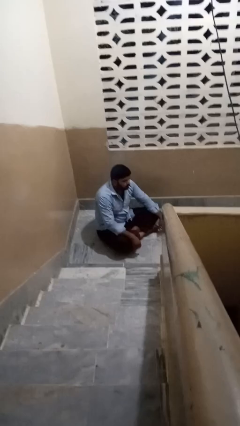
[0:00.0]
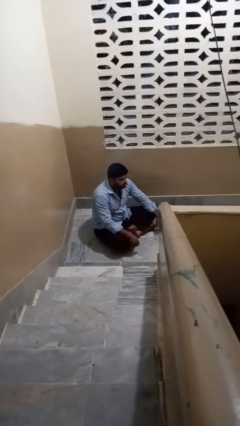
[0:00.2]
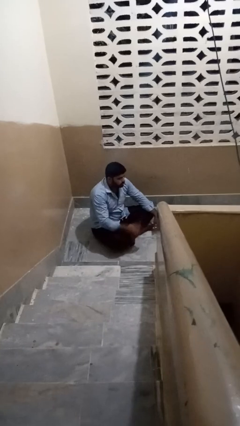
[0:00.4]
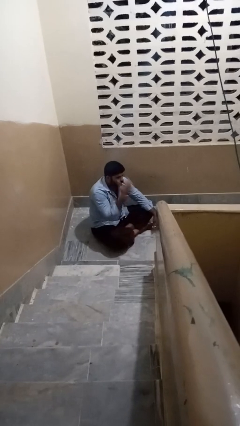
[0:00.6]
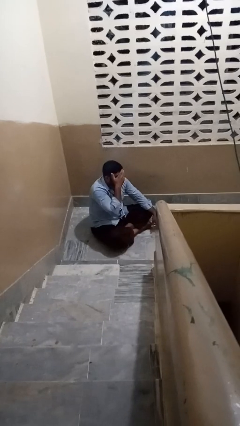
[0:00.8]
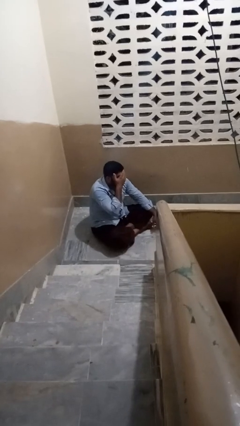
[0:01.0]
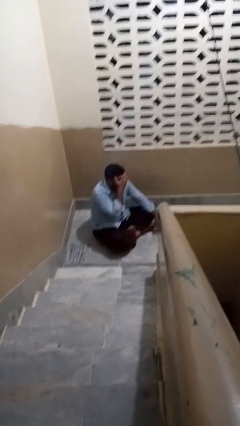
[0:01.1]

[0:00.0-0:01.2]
person covers face with hands

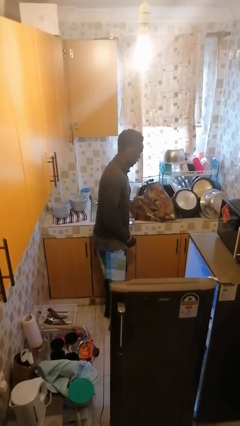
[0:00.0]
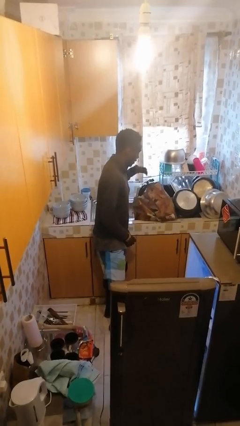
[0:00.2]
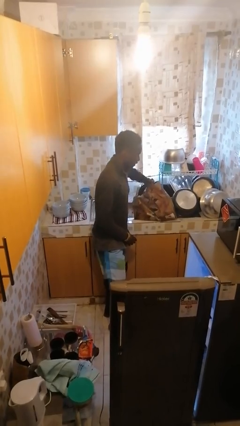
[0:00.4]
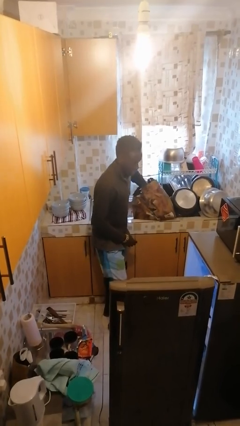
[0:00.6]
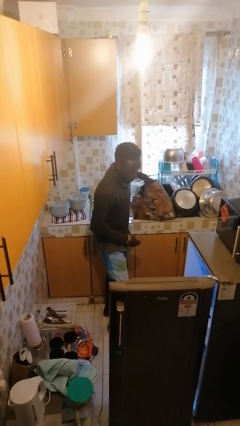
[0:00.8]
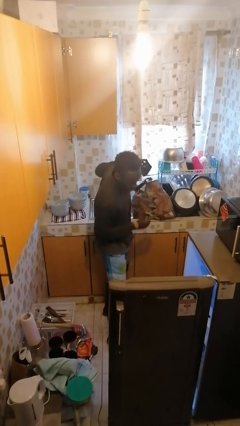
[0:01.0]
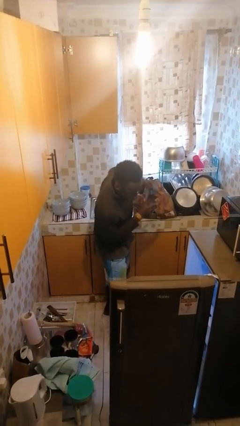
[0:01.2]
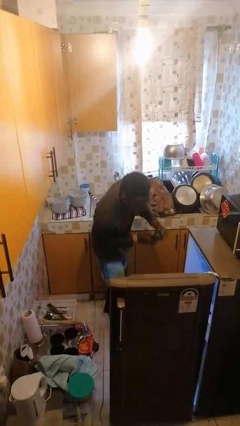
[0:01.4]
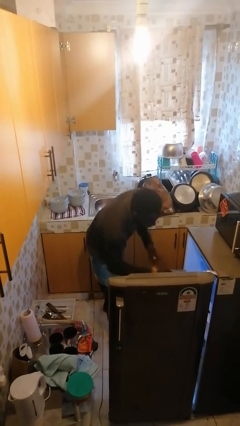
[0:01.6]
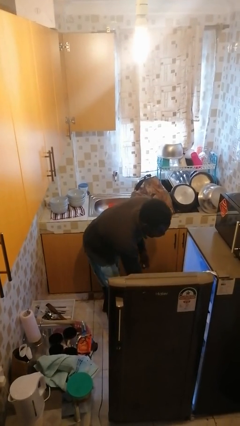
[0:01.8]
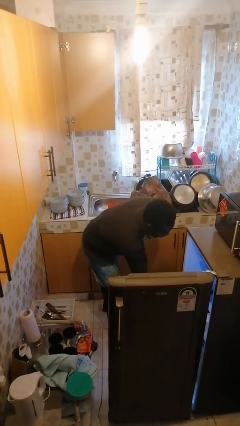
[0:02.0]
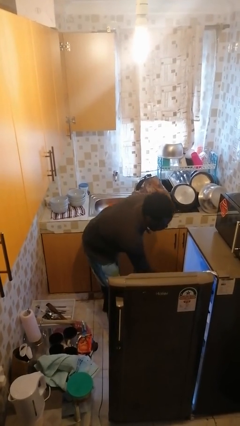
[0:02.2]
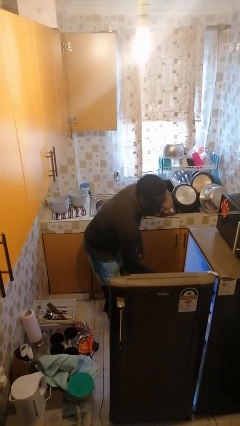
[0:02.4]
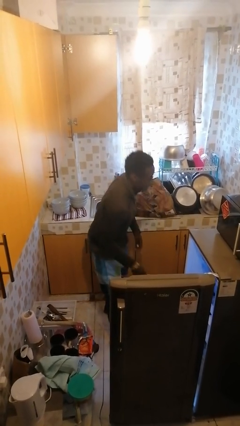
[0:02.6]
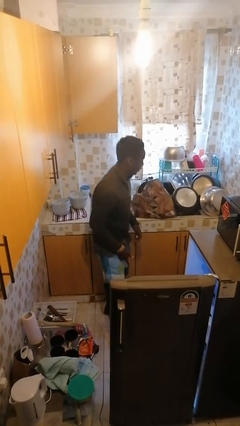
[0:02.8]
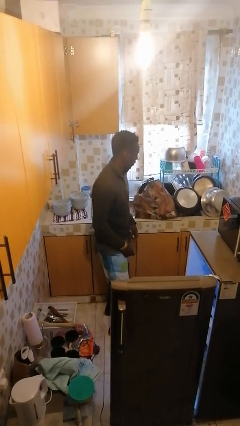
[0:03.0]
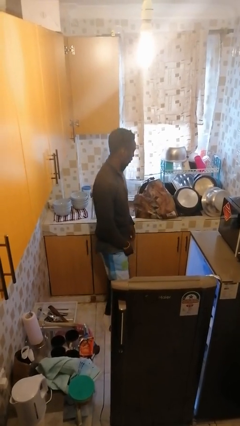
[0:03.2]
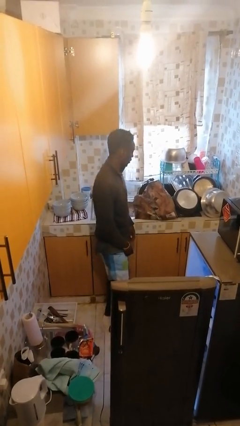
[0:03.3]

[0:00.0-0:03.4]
person loads groceries into refrigerator

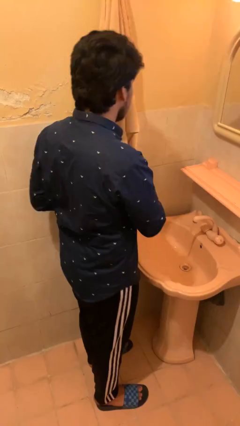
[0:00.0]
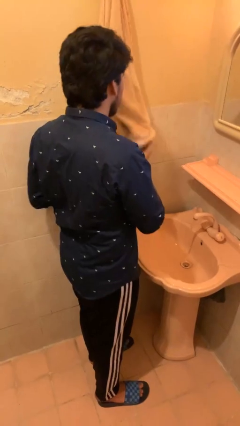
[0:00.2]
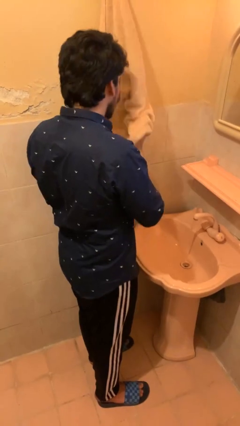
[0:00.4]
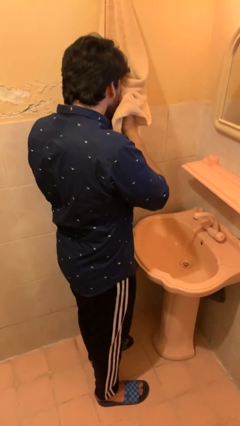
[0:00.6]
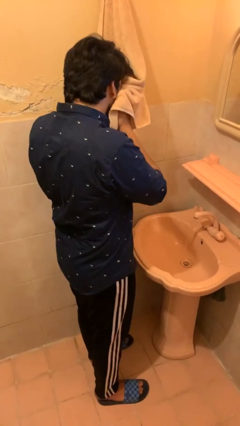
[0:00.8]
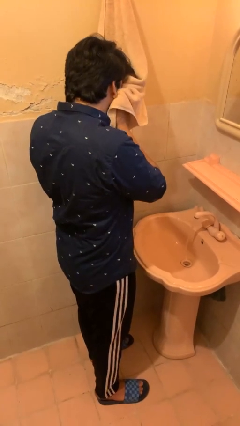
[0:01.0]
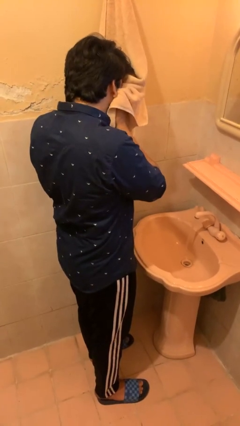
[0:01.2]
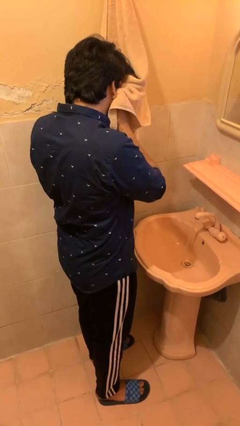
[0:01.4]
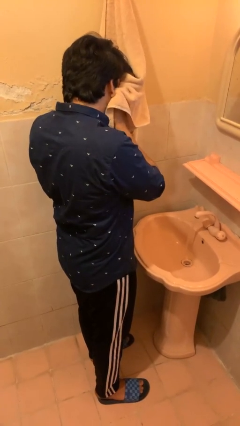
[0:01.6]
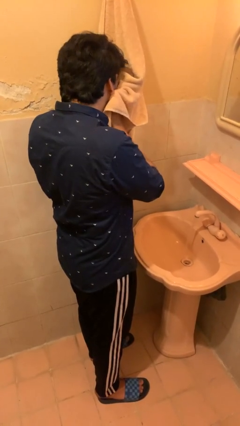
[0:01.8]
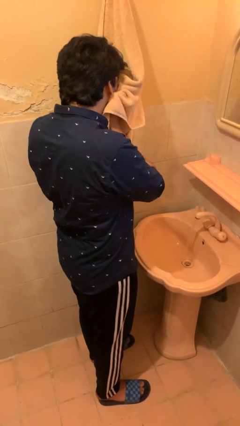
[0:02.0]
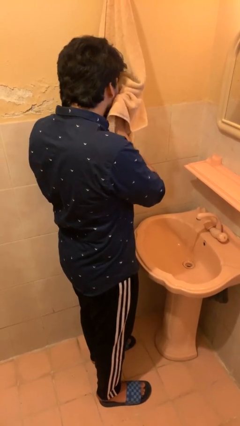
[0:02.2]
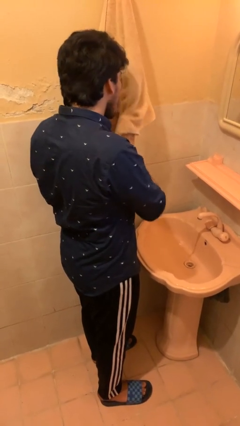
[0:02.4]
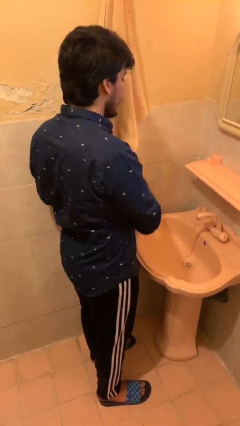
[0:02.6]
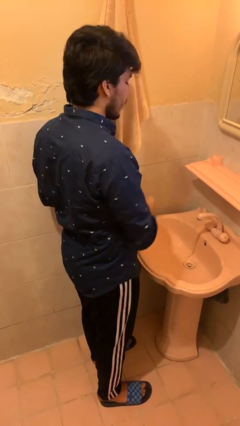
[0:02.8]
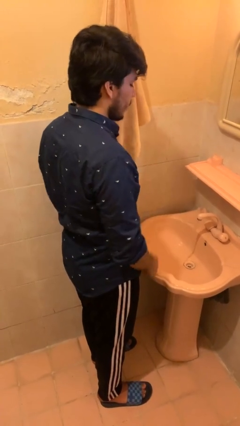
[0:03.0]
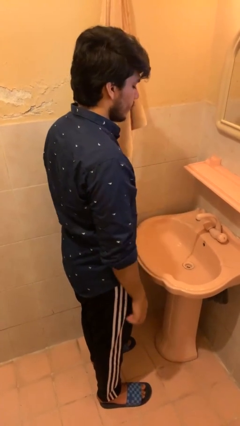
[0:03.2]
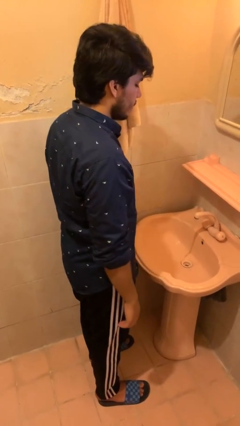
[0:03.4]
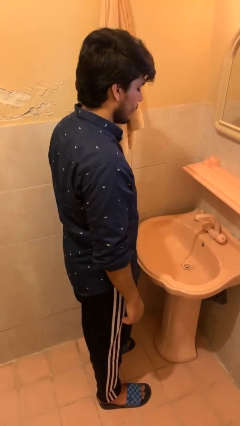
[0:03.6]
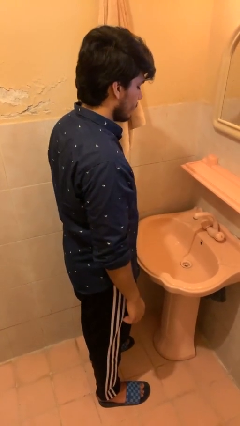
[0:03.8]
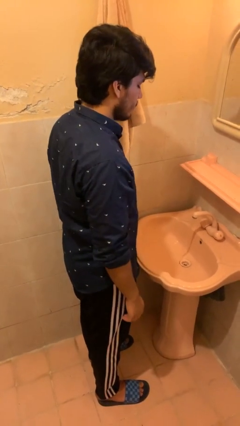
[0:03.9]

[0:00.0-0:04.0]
person dries face with towel

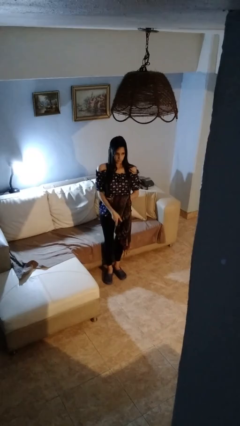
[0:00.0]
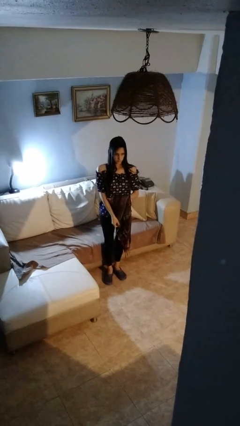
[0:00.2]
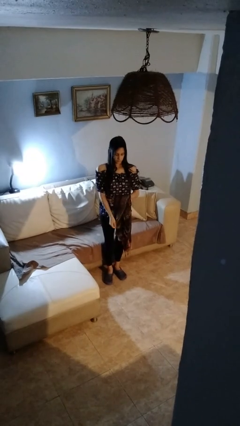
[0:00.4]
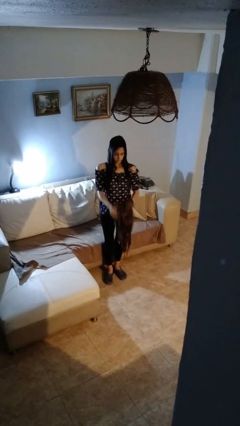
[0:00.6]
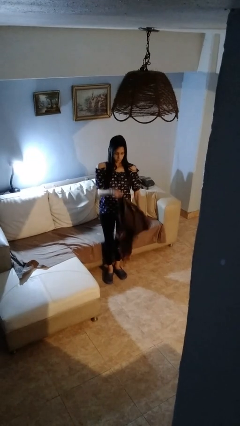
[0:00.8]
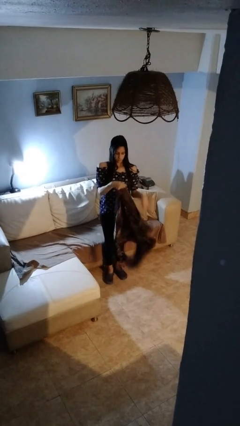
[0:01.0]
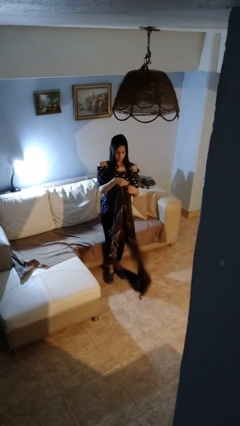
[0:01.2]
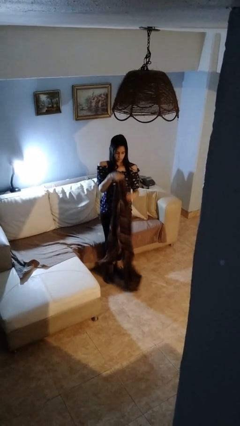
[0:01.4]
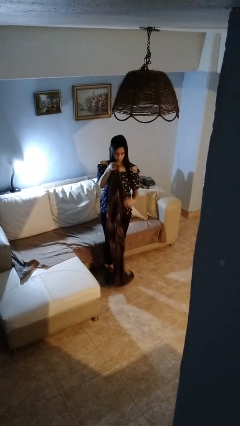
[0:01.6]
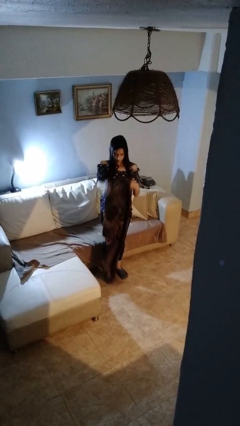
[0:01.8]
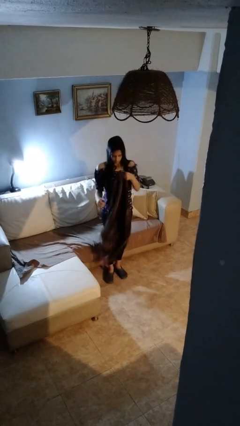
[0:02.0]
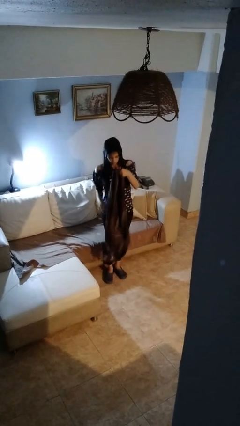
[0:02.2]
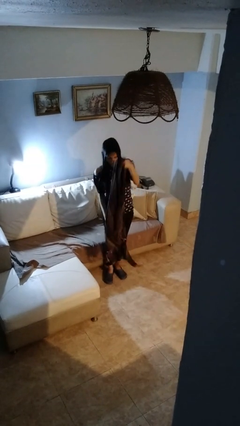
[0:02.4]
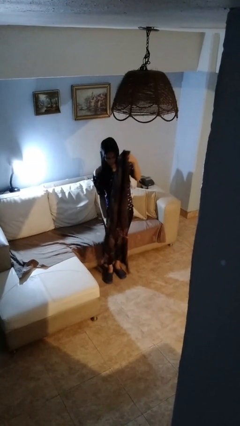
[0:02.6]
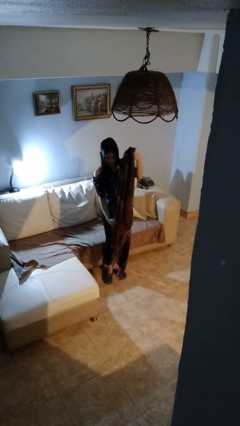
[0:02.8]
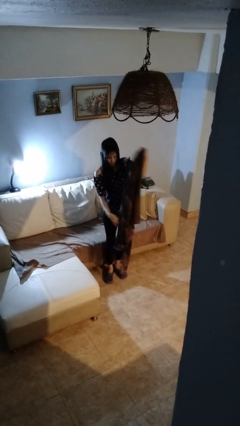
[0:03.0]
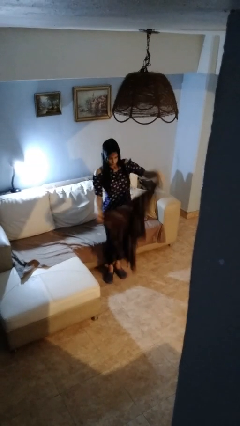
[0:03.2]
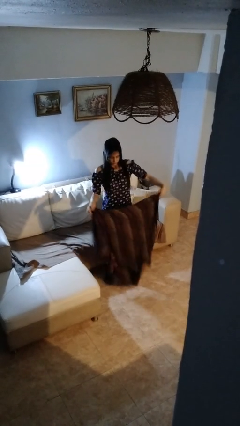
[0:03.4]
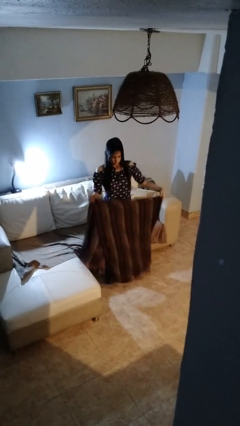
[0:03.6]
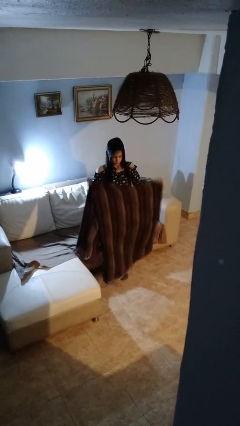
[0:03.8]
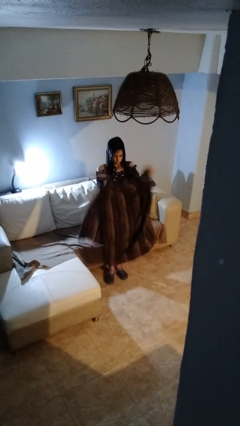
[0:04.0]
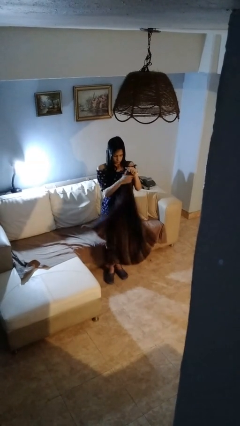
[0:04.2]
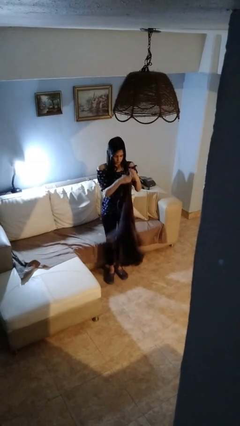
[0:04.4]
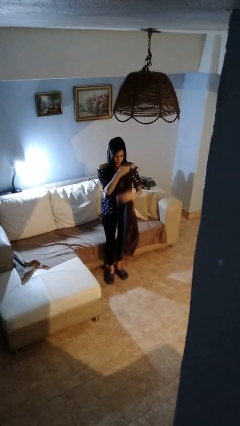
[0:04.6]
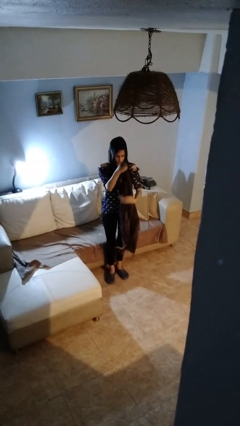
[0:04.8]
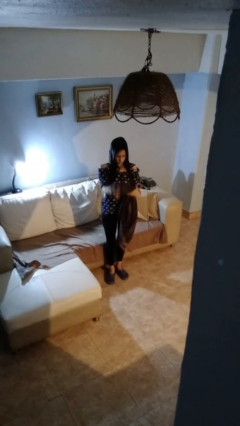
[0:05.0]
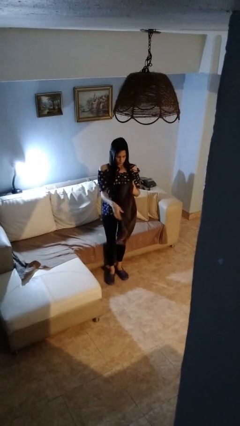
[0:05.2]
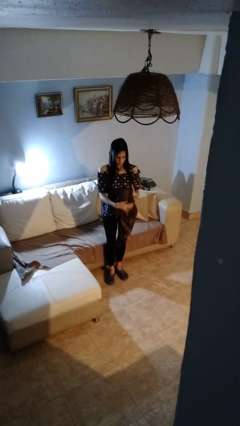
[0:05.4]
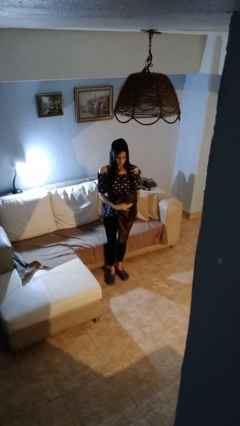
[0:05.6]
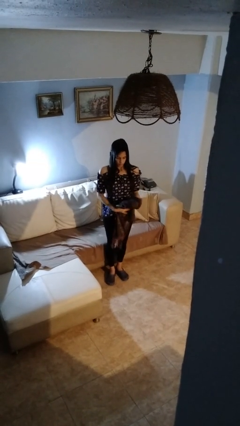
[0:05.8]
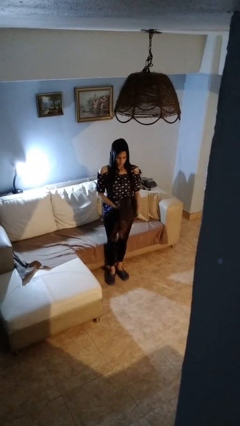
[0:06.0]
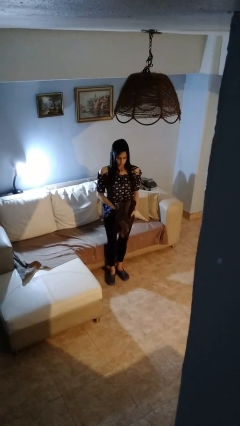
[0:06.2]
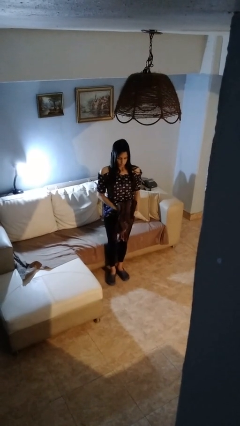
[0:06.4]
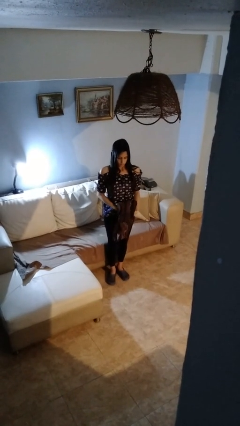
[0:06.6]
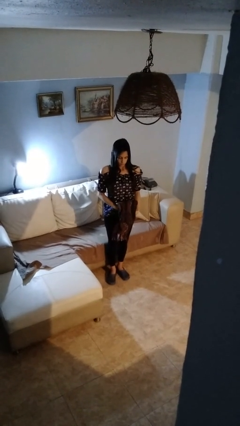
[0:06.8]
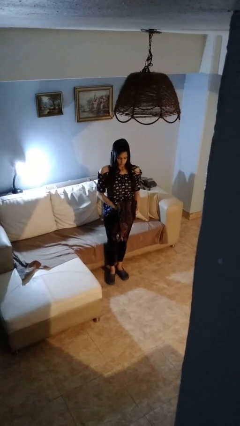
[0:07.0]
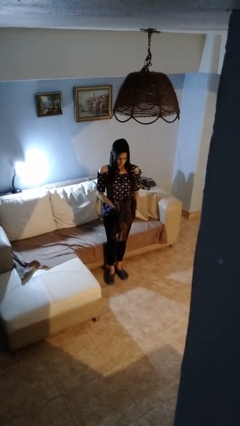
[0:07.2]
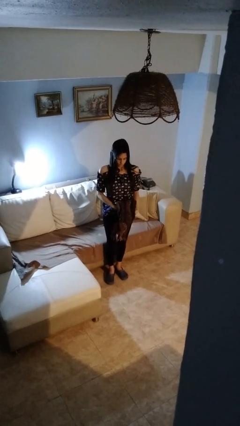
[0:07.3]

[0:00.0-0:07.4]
person folds blanket

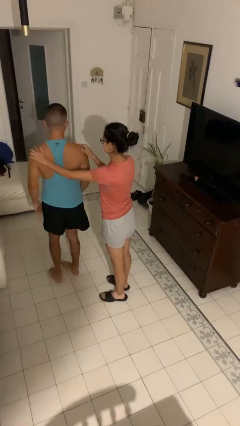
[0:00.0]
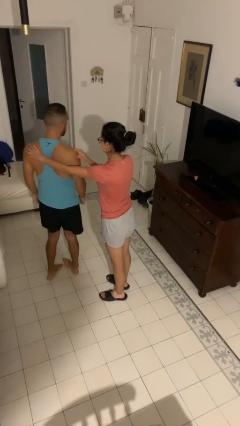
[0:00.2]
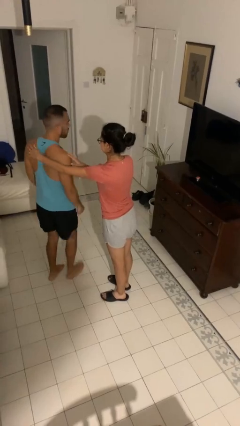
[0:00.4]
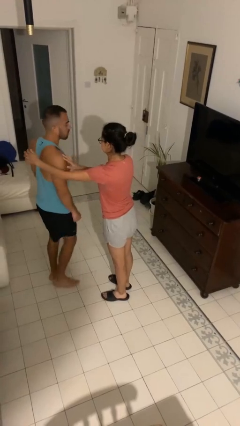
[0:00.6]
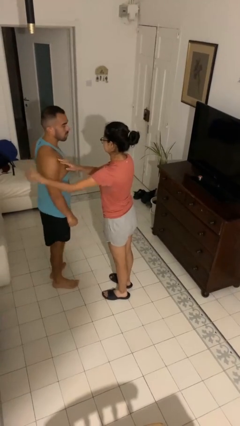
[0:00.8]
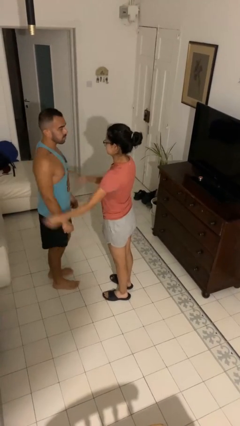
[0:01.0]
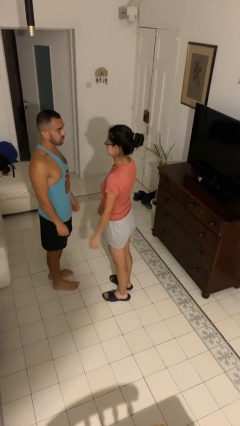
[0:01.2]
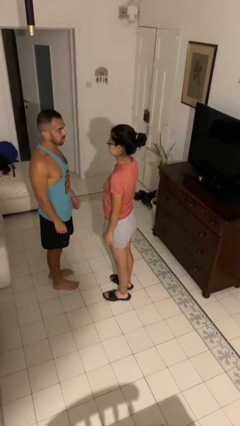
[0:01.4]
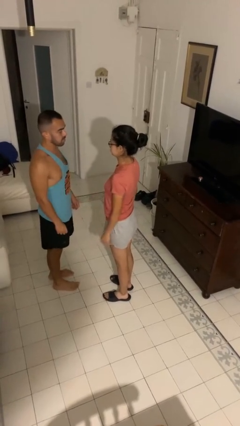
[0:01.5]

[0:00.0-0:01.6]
person spins person around
